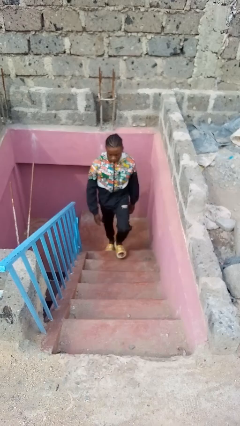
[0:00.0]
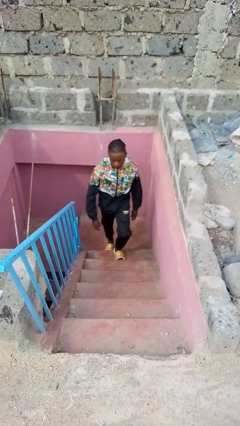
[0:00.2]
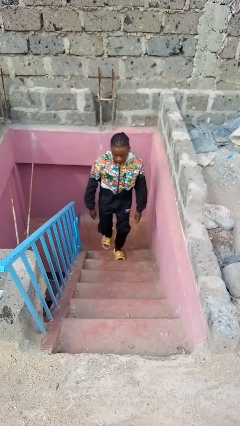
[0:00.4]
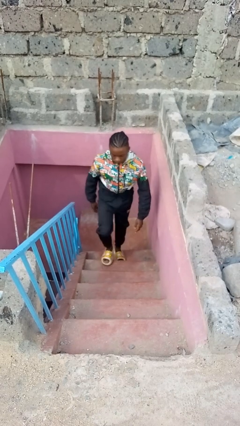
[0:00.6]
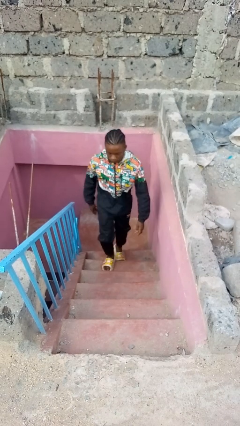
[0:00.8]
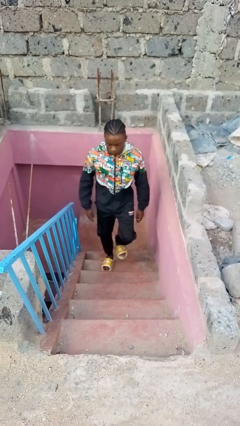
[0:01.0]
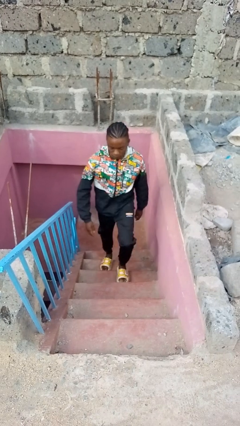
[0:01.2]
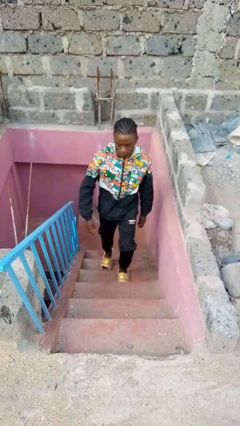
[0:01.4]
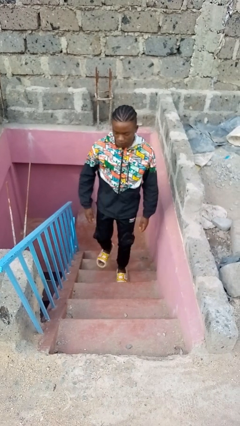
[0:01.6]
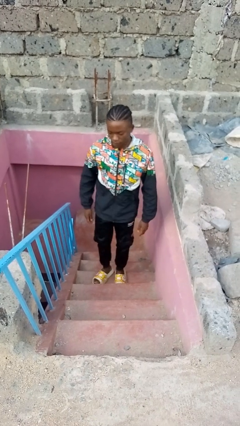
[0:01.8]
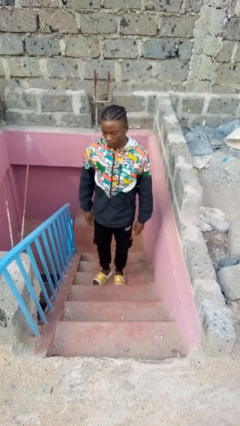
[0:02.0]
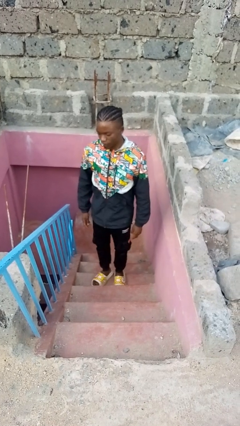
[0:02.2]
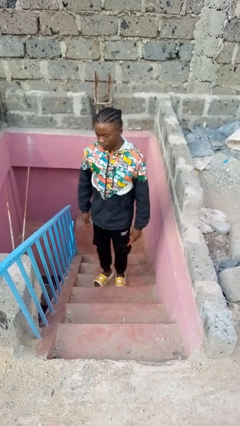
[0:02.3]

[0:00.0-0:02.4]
person climbs up stairs

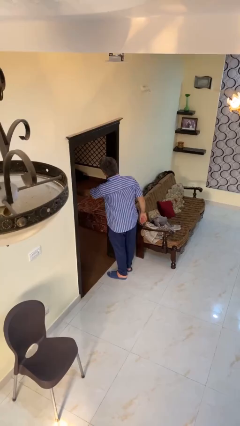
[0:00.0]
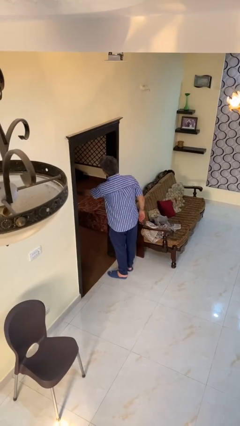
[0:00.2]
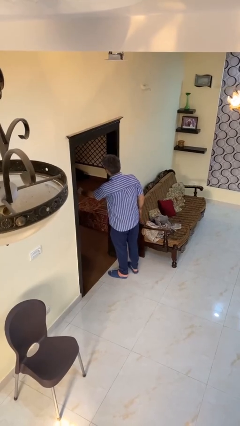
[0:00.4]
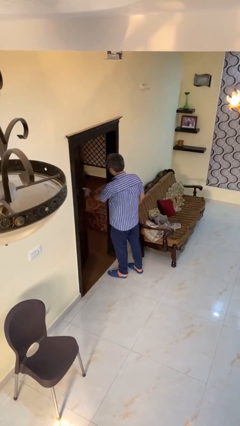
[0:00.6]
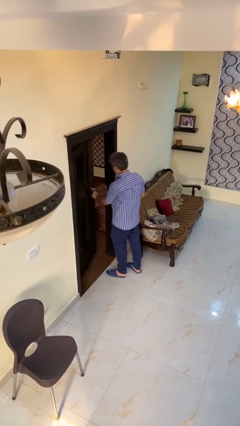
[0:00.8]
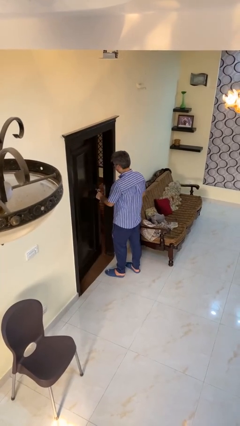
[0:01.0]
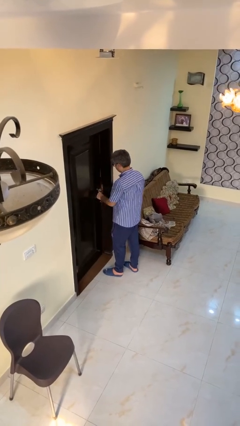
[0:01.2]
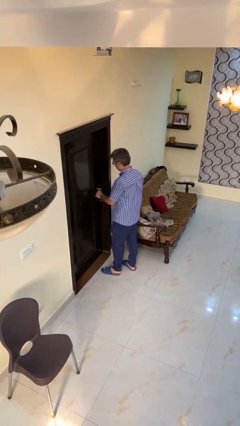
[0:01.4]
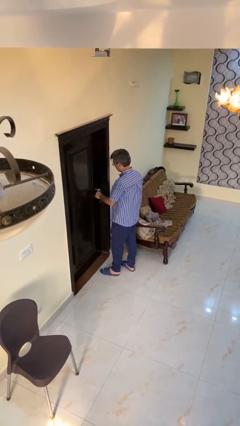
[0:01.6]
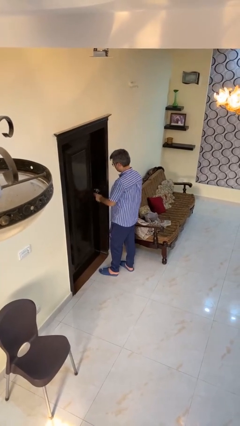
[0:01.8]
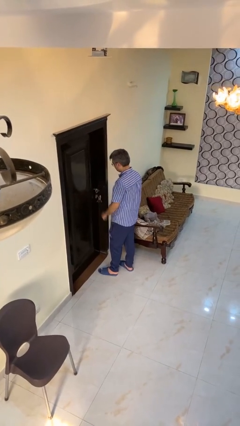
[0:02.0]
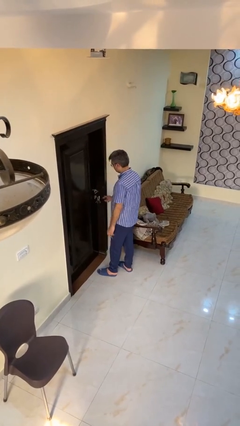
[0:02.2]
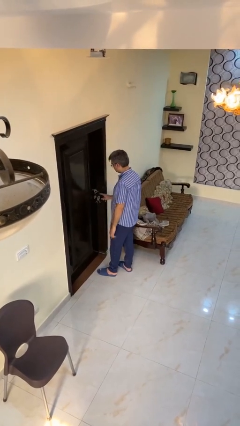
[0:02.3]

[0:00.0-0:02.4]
person closes facility door

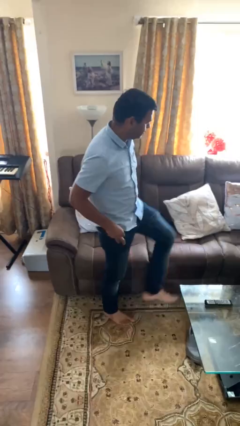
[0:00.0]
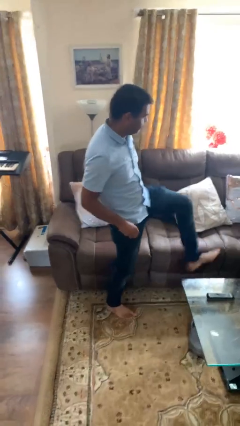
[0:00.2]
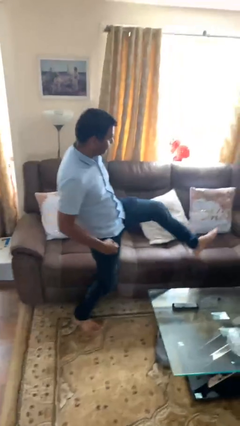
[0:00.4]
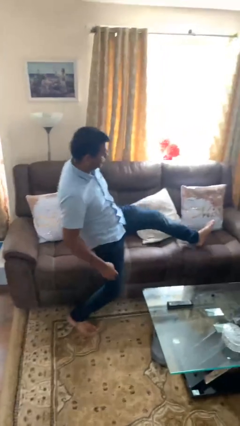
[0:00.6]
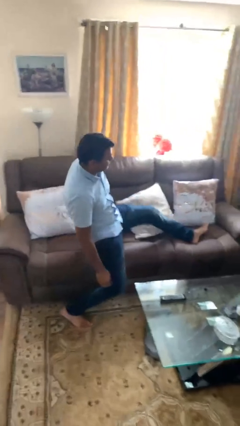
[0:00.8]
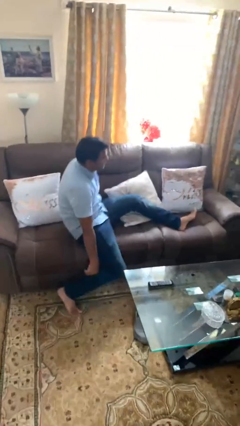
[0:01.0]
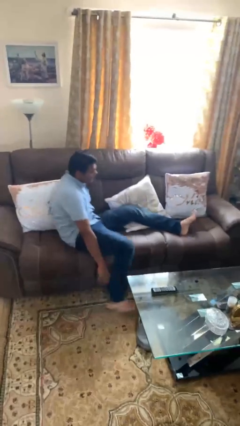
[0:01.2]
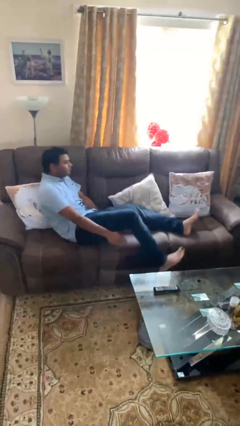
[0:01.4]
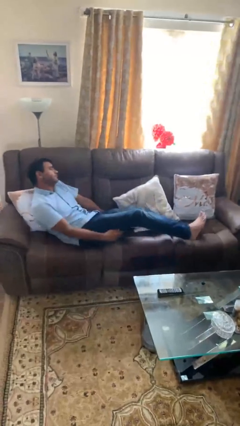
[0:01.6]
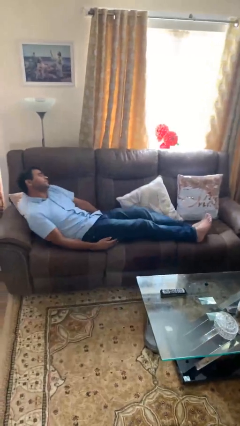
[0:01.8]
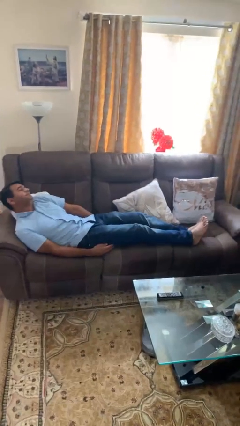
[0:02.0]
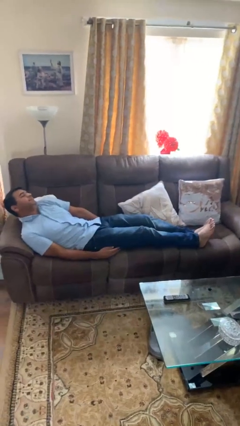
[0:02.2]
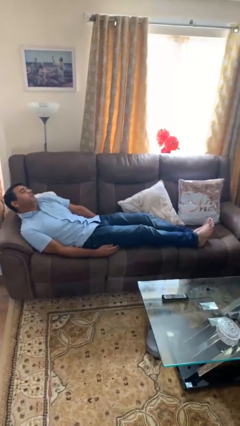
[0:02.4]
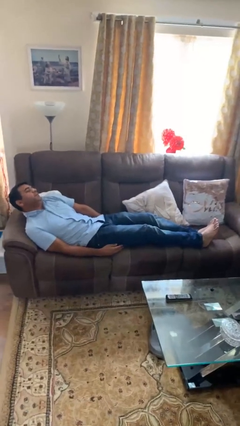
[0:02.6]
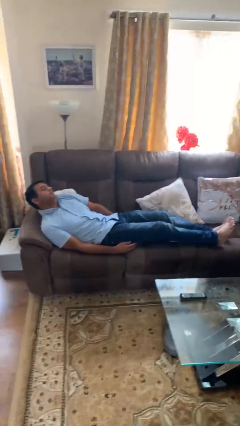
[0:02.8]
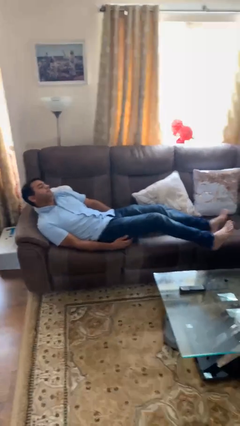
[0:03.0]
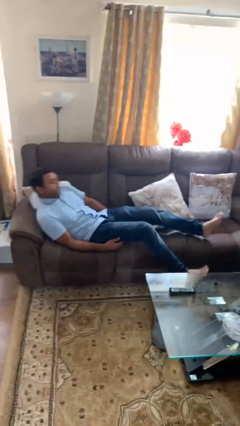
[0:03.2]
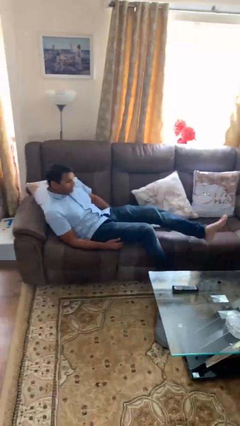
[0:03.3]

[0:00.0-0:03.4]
person lies down on couch

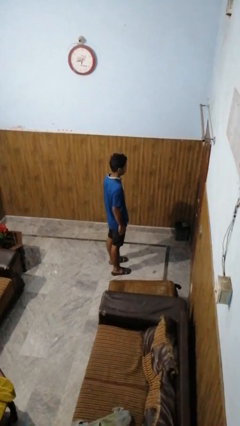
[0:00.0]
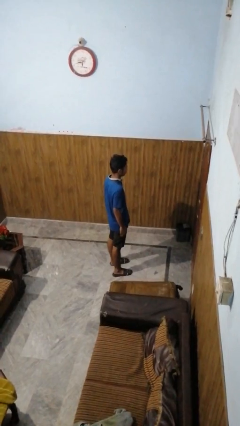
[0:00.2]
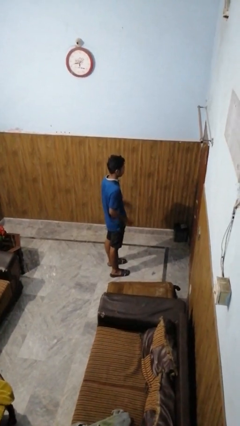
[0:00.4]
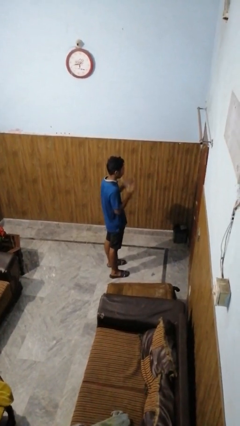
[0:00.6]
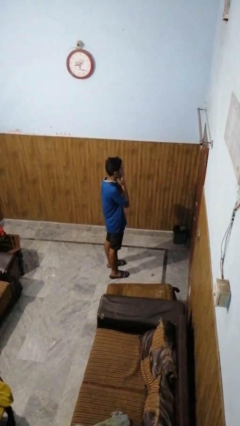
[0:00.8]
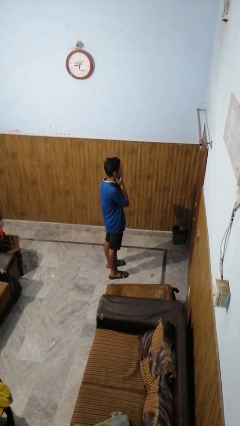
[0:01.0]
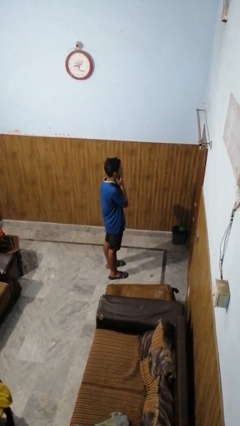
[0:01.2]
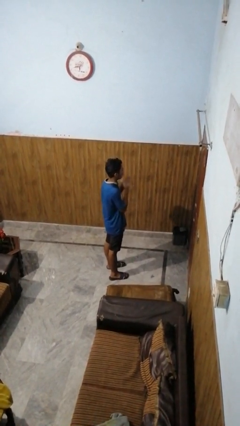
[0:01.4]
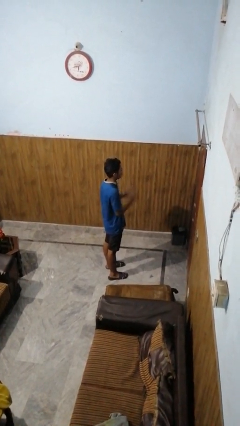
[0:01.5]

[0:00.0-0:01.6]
person covers face with hands

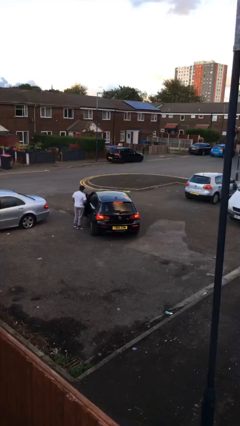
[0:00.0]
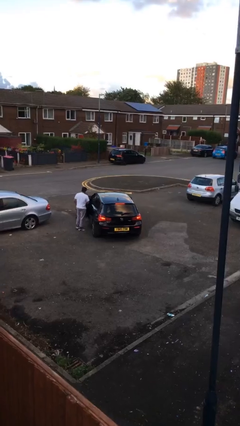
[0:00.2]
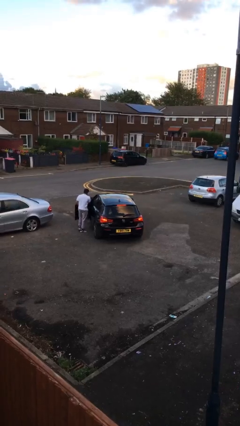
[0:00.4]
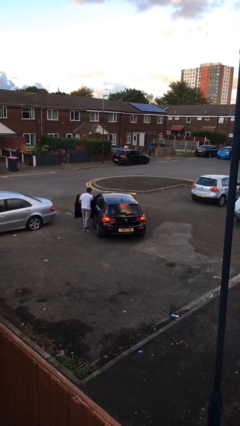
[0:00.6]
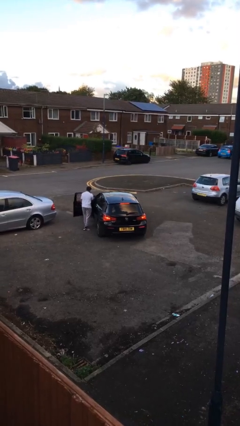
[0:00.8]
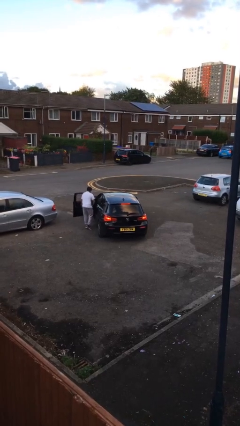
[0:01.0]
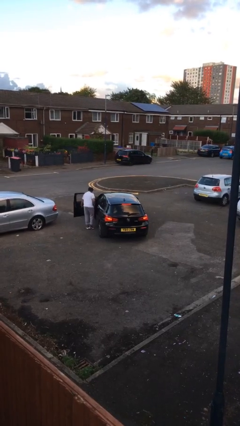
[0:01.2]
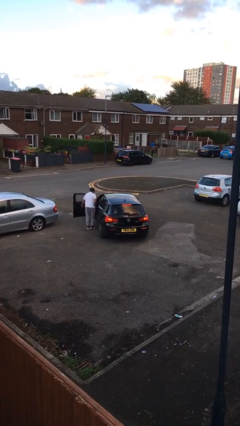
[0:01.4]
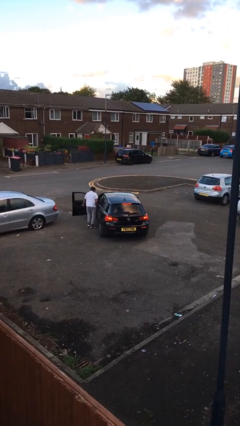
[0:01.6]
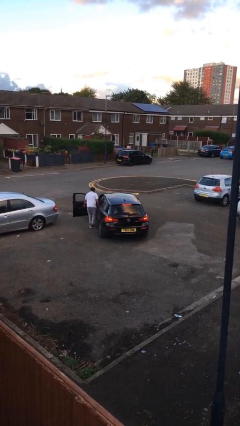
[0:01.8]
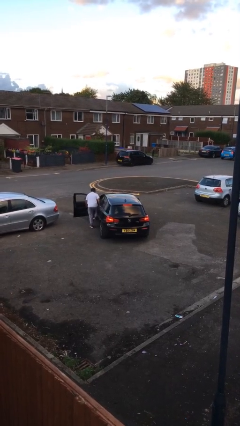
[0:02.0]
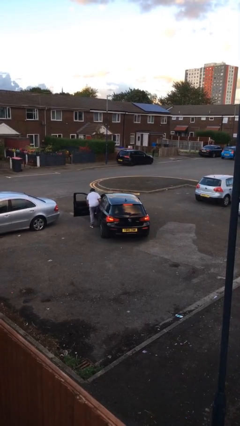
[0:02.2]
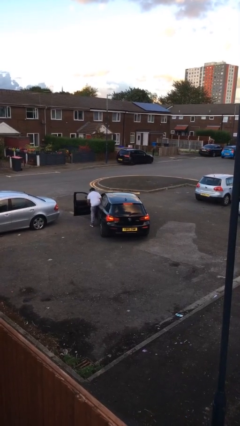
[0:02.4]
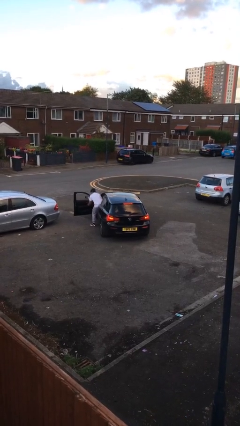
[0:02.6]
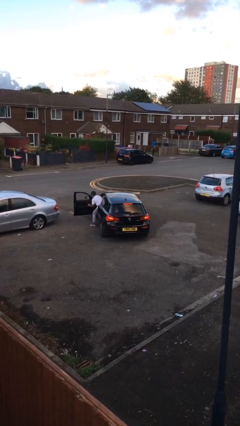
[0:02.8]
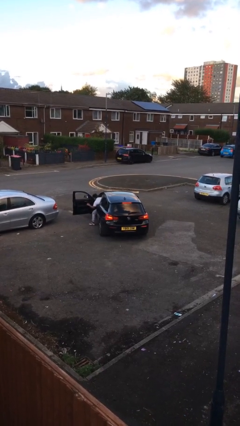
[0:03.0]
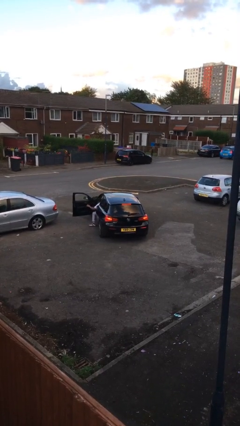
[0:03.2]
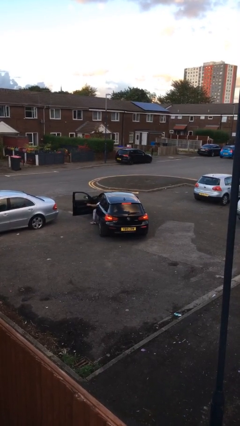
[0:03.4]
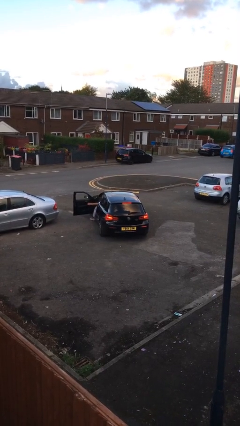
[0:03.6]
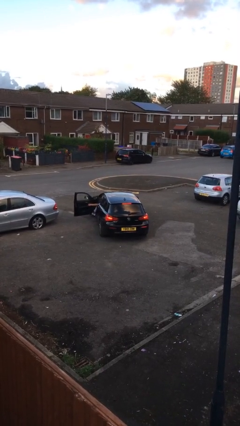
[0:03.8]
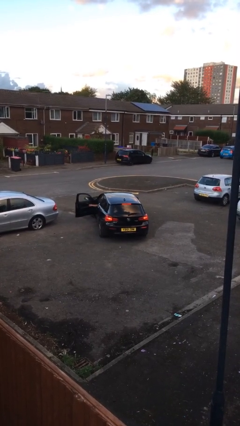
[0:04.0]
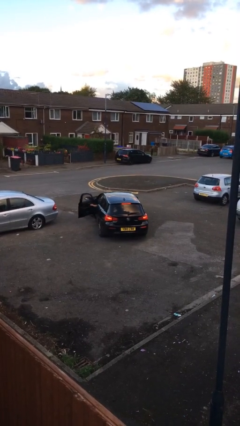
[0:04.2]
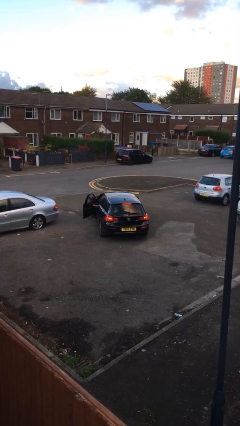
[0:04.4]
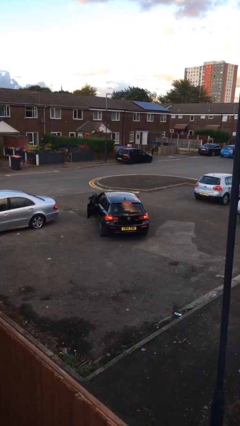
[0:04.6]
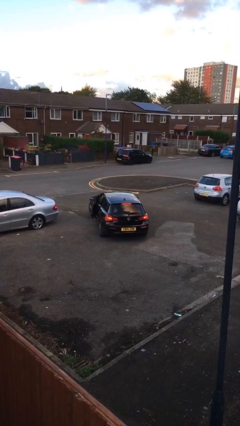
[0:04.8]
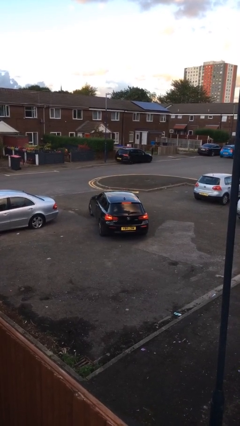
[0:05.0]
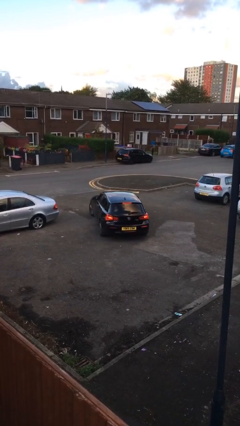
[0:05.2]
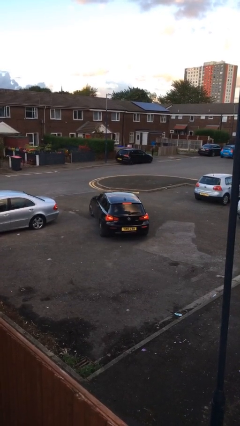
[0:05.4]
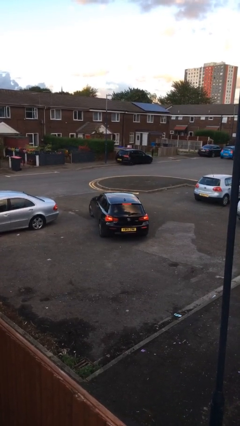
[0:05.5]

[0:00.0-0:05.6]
car picks up person

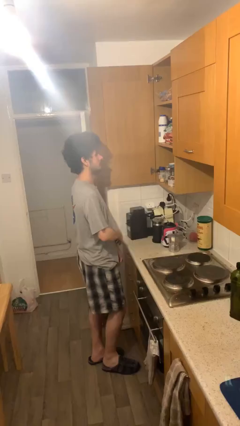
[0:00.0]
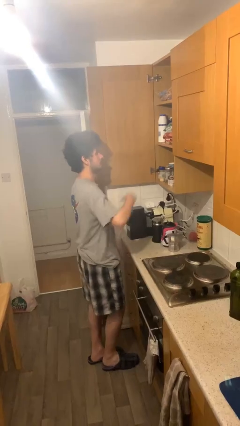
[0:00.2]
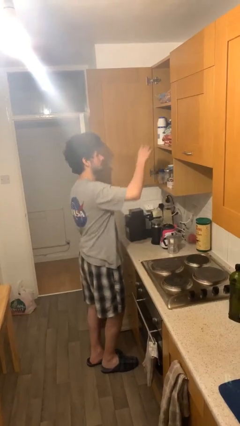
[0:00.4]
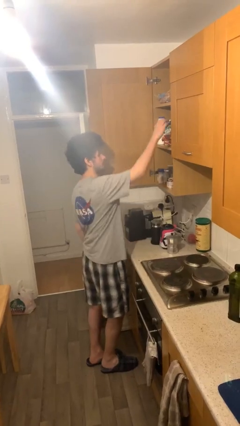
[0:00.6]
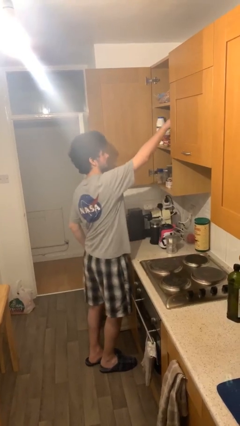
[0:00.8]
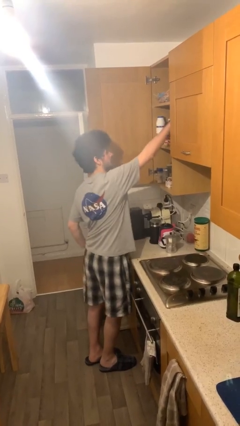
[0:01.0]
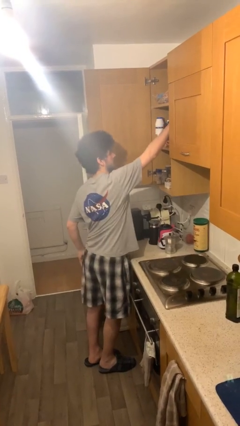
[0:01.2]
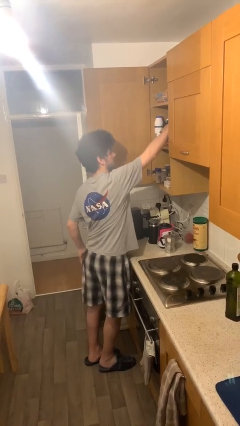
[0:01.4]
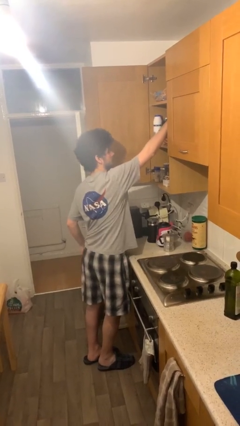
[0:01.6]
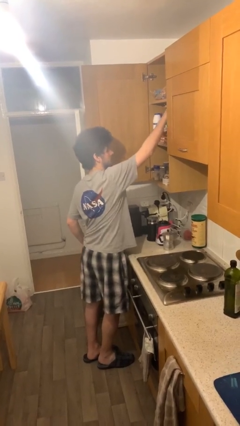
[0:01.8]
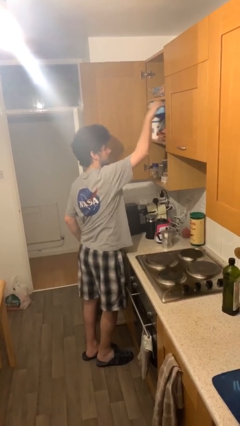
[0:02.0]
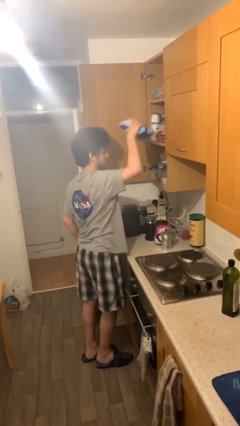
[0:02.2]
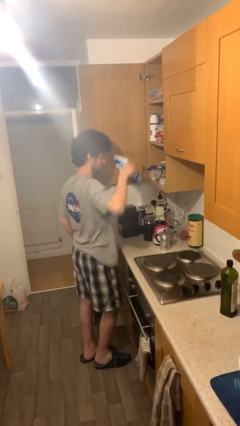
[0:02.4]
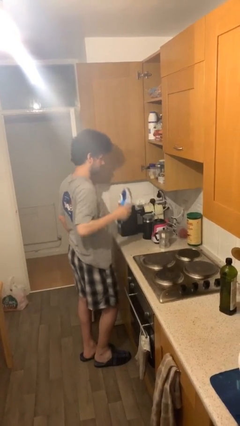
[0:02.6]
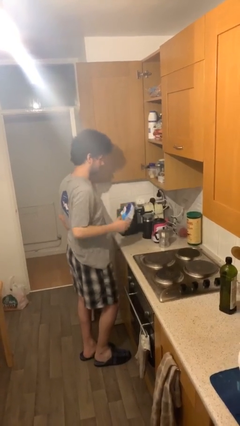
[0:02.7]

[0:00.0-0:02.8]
person picks up object from shelf
